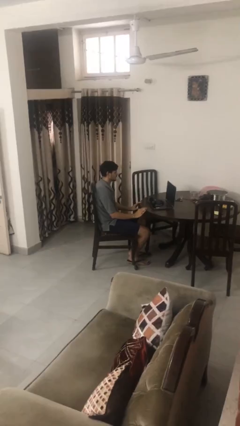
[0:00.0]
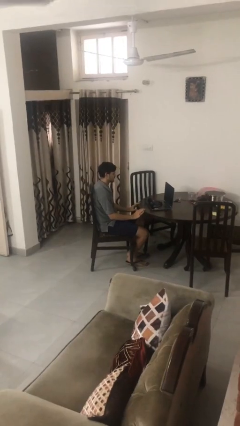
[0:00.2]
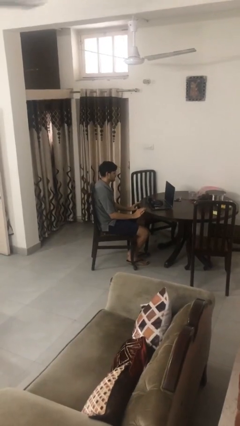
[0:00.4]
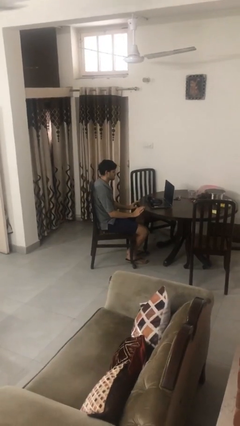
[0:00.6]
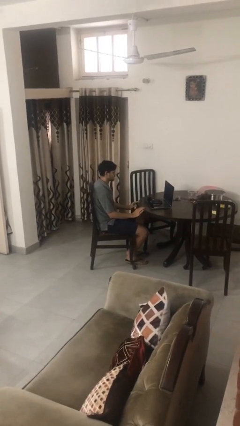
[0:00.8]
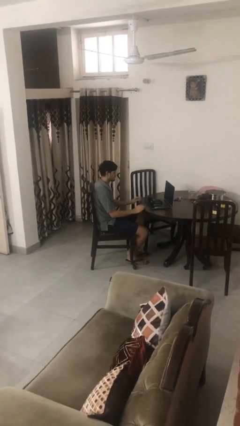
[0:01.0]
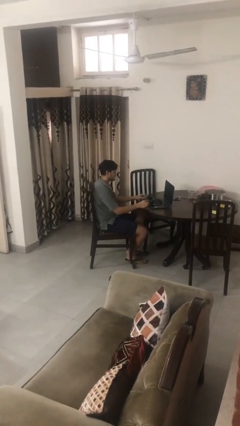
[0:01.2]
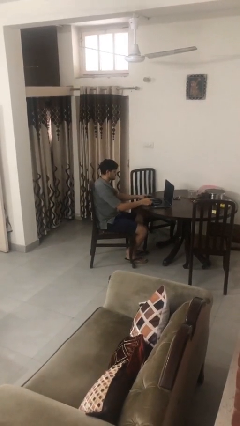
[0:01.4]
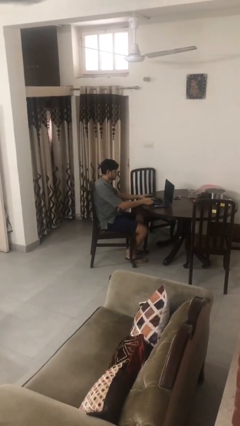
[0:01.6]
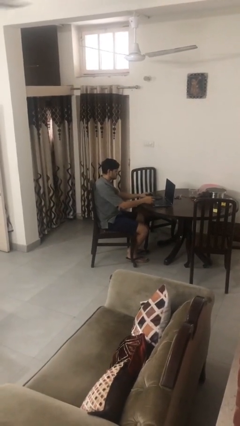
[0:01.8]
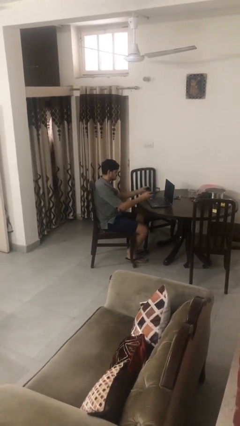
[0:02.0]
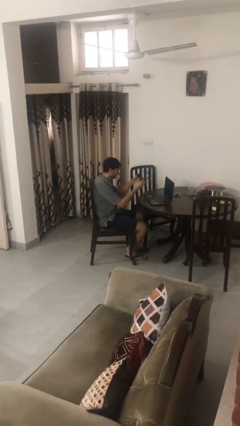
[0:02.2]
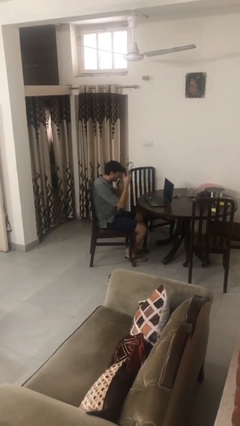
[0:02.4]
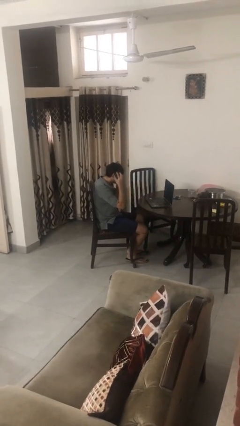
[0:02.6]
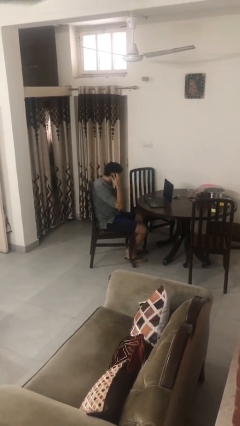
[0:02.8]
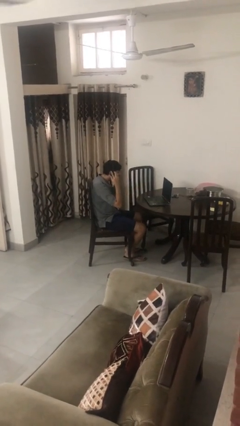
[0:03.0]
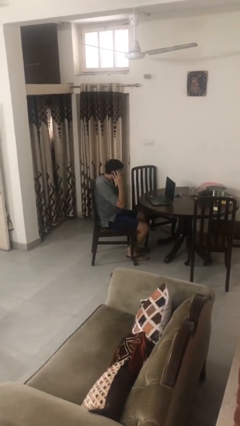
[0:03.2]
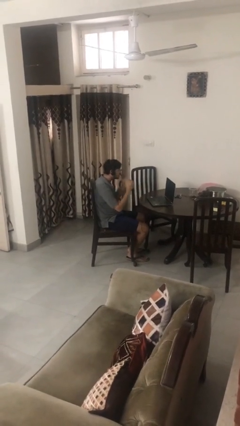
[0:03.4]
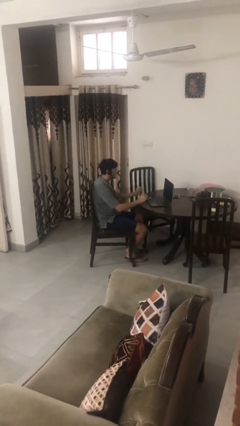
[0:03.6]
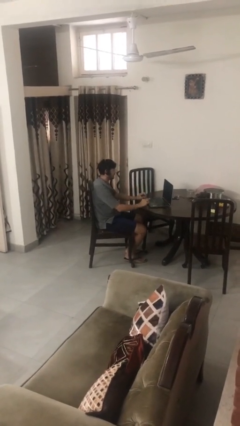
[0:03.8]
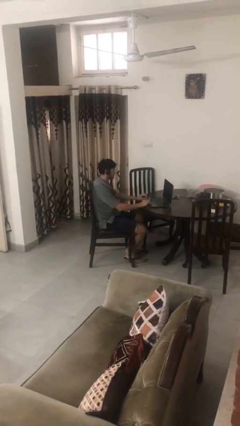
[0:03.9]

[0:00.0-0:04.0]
person puts on headphones

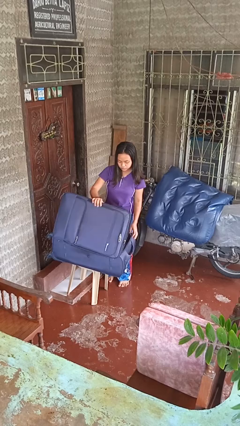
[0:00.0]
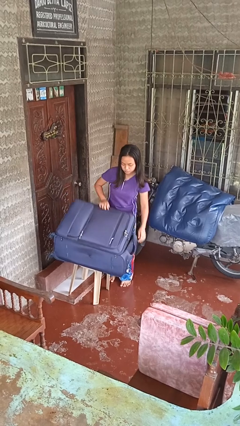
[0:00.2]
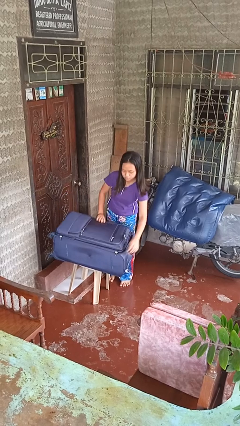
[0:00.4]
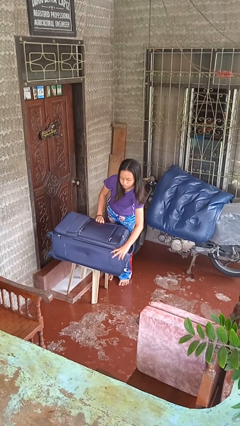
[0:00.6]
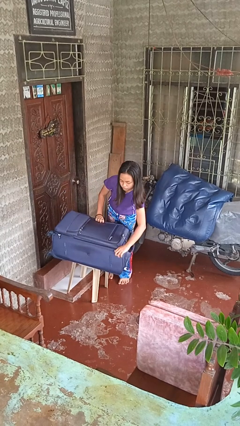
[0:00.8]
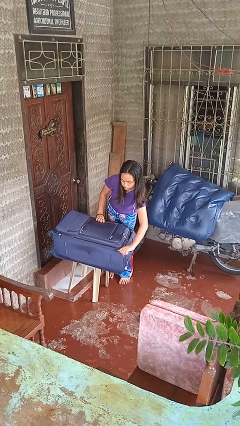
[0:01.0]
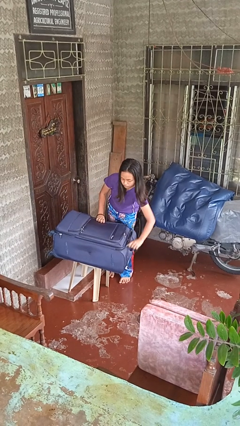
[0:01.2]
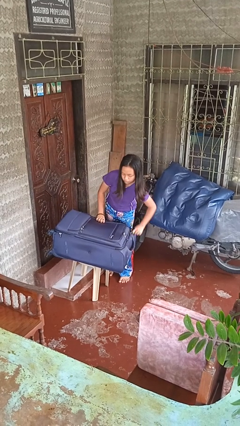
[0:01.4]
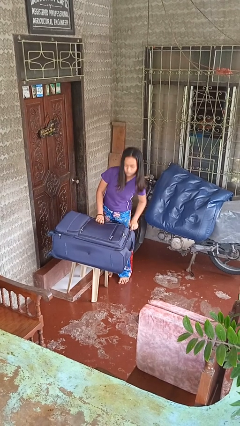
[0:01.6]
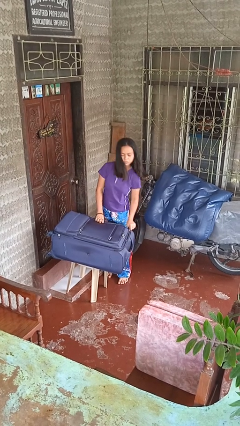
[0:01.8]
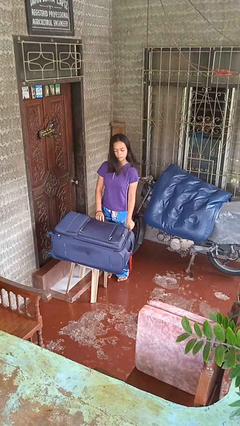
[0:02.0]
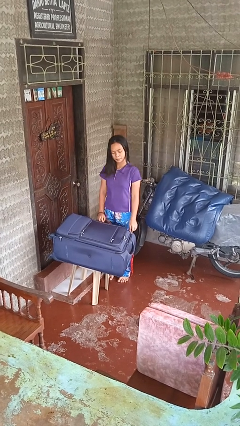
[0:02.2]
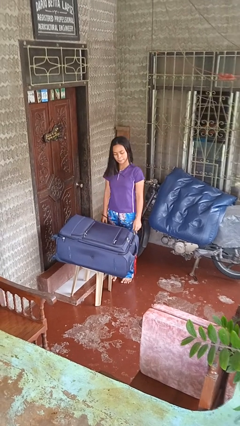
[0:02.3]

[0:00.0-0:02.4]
person closes suitcase

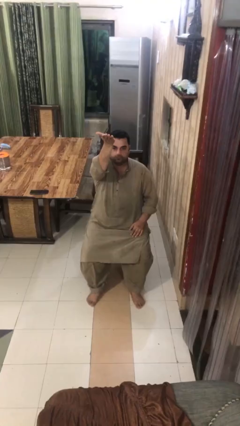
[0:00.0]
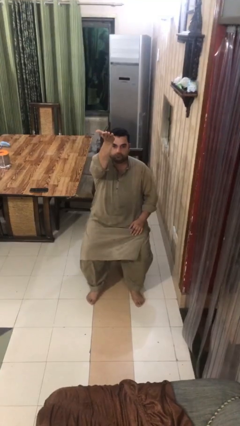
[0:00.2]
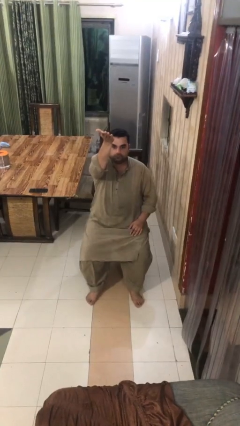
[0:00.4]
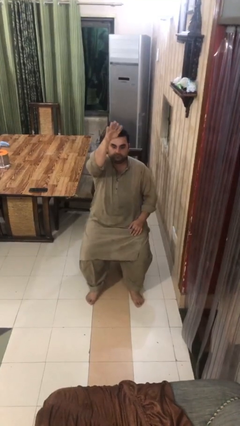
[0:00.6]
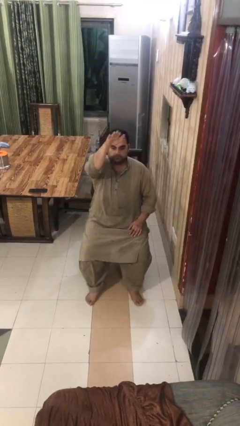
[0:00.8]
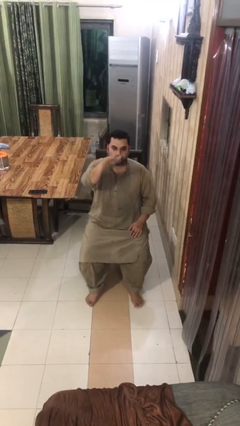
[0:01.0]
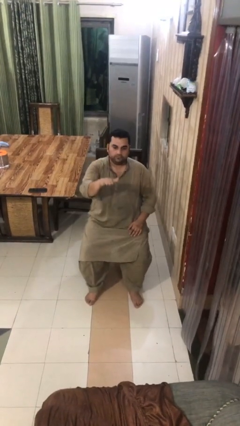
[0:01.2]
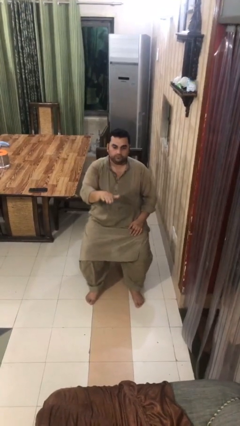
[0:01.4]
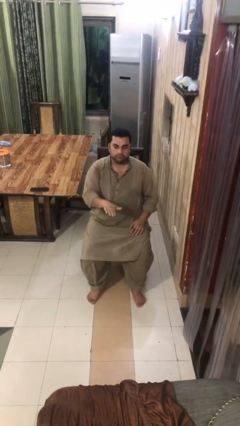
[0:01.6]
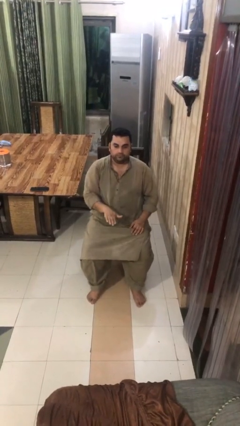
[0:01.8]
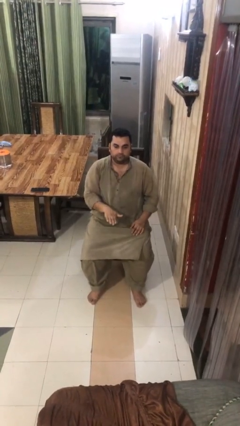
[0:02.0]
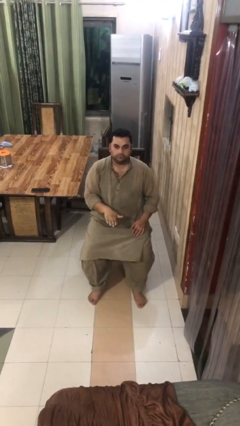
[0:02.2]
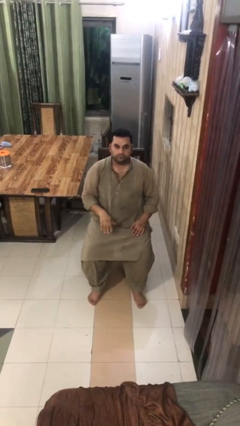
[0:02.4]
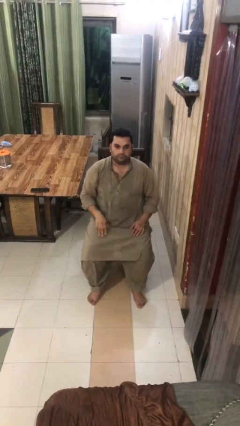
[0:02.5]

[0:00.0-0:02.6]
person gestures swipe down

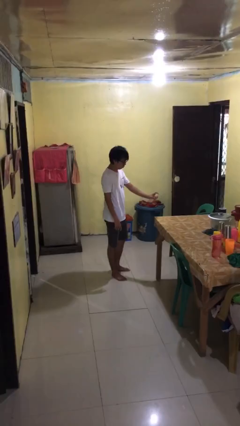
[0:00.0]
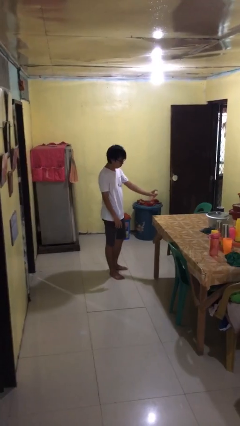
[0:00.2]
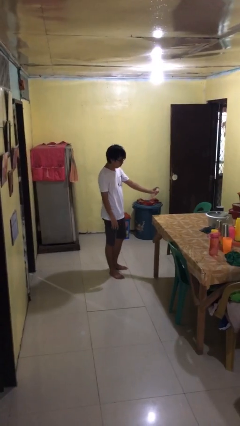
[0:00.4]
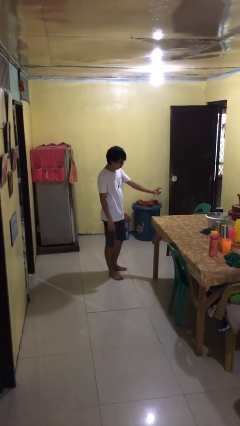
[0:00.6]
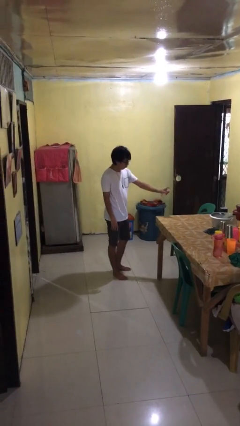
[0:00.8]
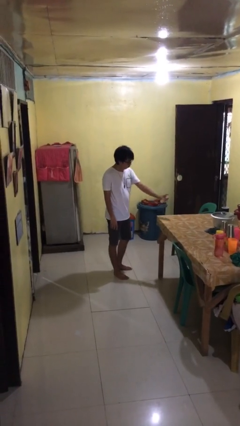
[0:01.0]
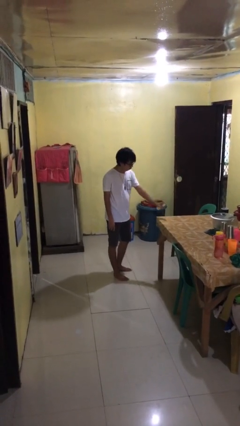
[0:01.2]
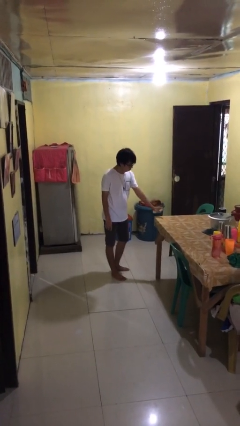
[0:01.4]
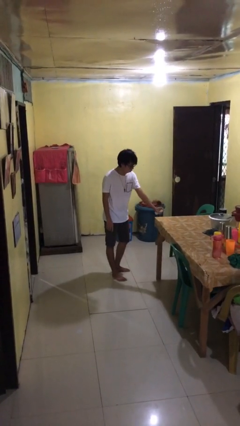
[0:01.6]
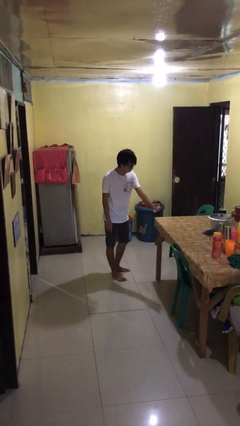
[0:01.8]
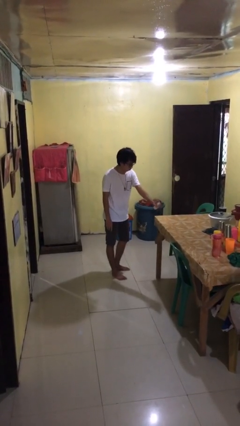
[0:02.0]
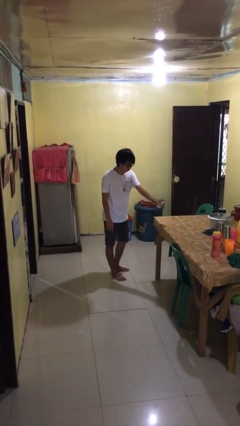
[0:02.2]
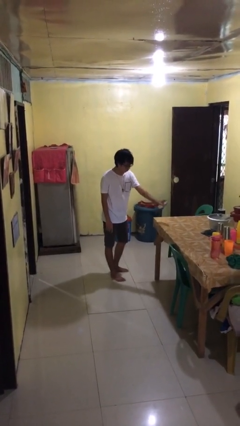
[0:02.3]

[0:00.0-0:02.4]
person sprays from bottle

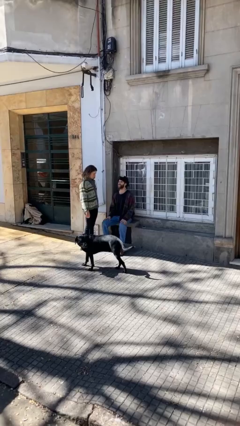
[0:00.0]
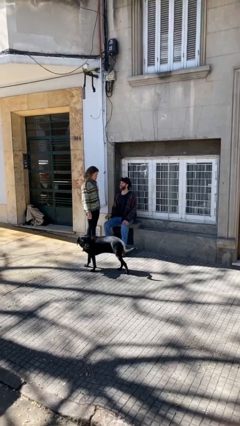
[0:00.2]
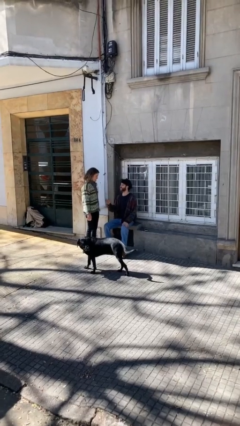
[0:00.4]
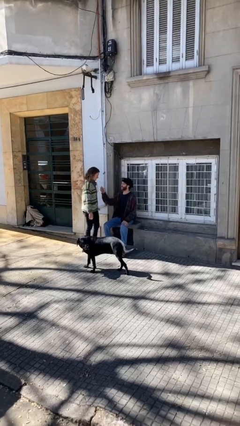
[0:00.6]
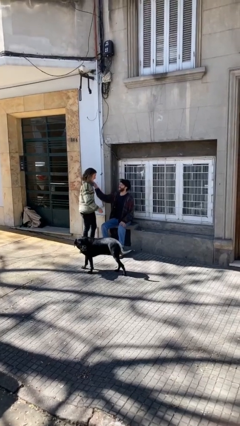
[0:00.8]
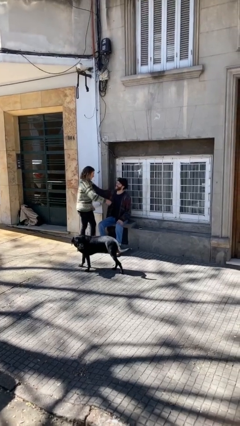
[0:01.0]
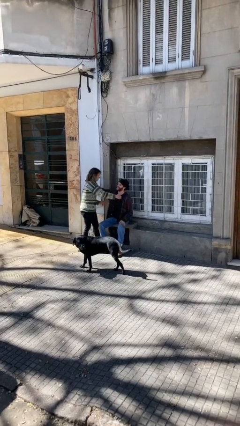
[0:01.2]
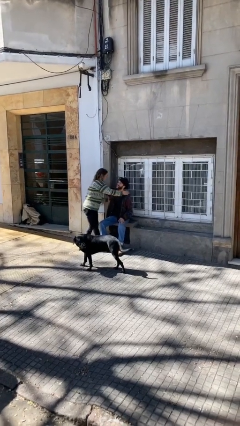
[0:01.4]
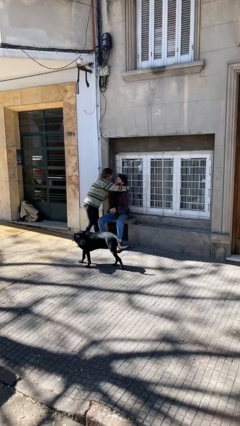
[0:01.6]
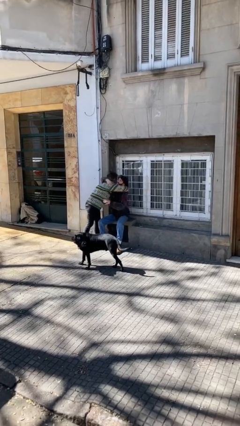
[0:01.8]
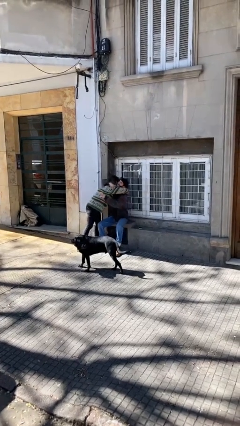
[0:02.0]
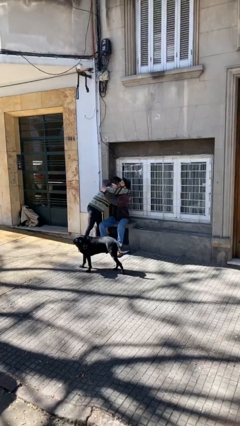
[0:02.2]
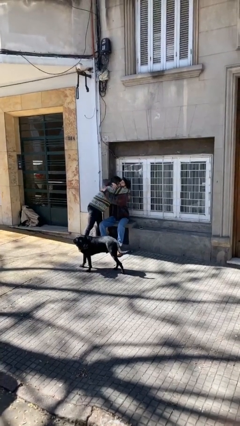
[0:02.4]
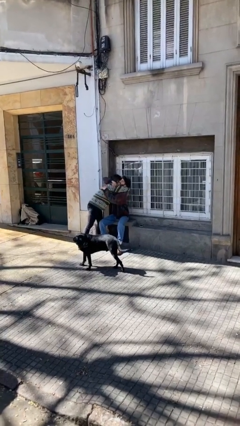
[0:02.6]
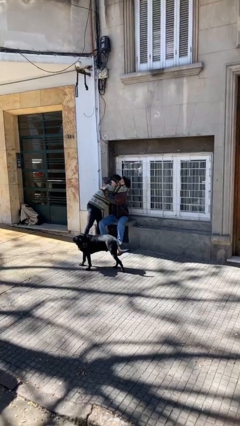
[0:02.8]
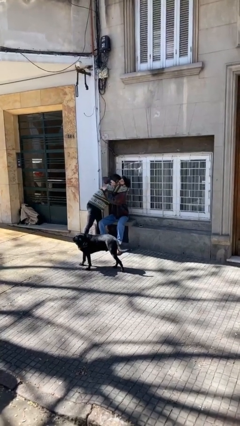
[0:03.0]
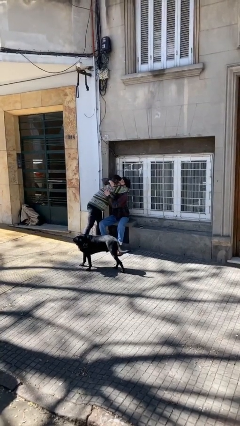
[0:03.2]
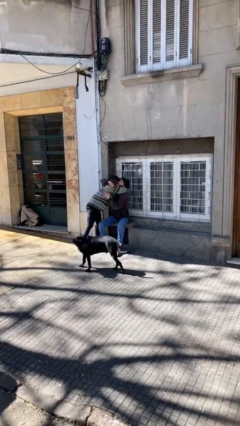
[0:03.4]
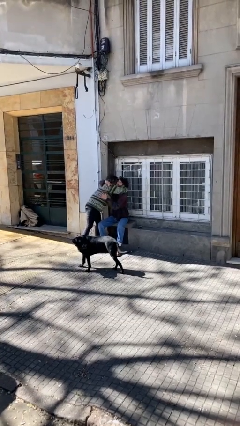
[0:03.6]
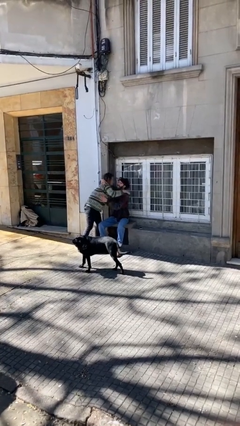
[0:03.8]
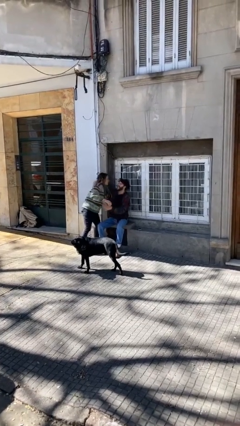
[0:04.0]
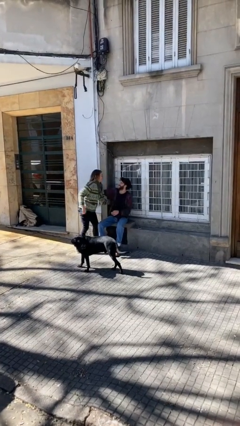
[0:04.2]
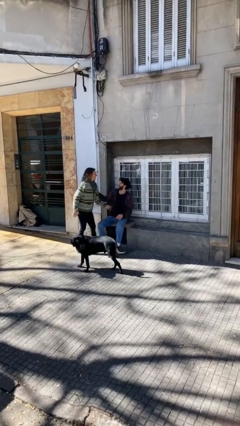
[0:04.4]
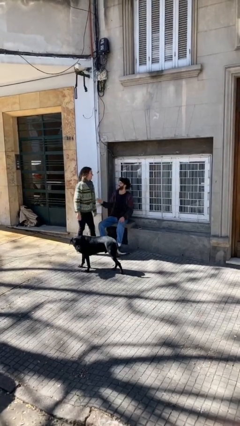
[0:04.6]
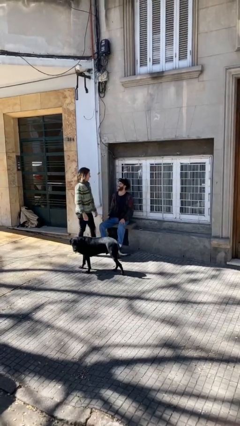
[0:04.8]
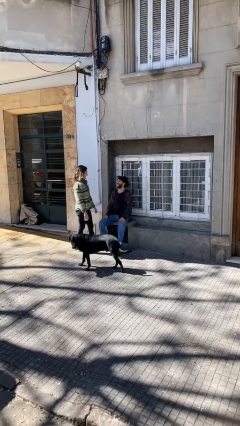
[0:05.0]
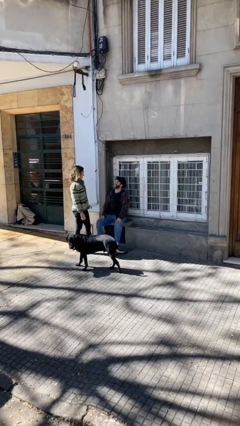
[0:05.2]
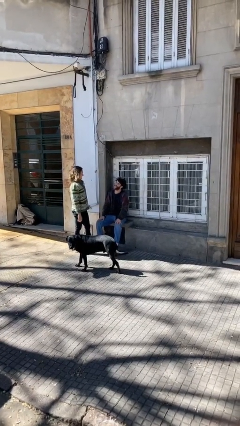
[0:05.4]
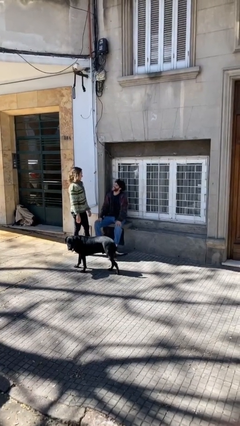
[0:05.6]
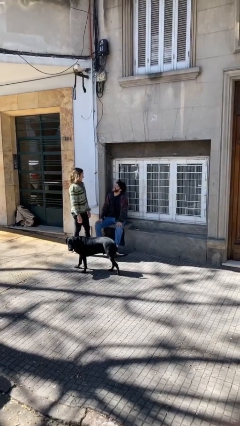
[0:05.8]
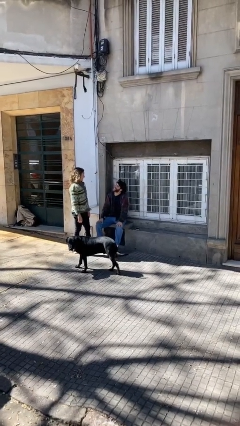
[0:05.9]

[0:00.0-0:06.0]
person embraces person

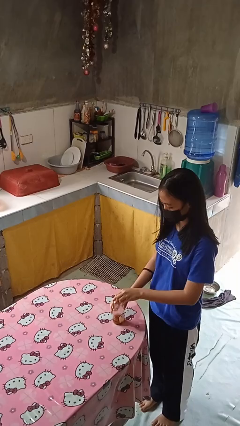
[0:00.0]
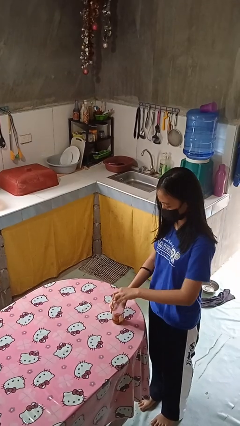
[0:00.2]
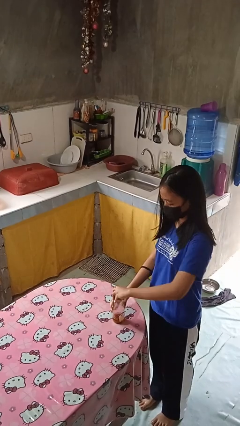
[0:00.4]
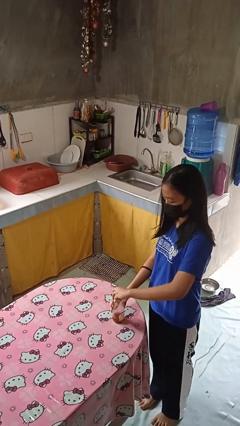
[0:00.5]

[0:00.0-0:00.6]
person closes jar
